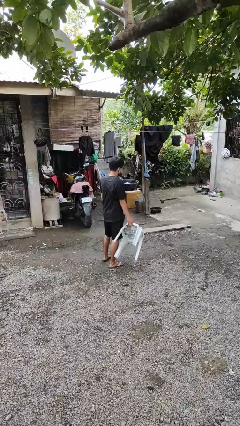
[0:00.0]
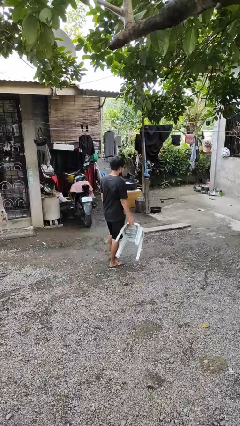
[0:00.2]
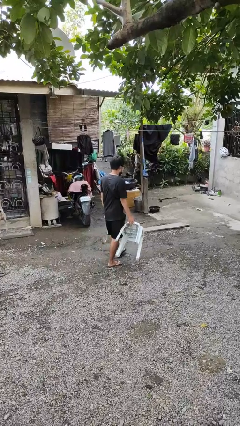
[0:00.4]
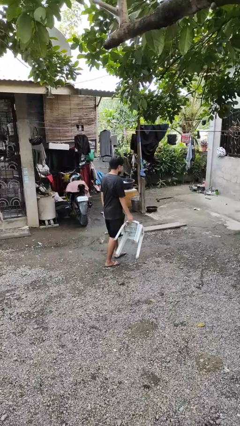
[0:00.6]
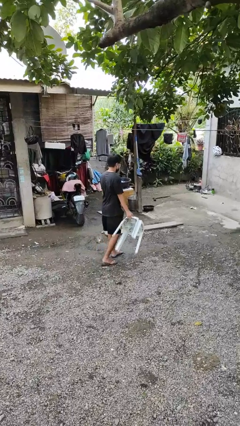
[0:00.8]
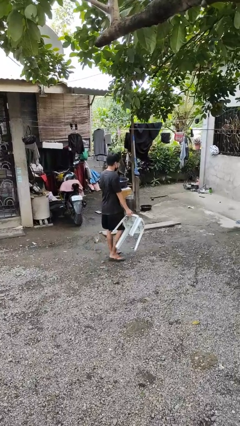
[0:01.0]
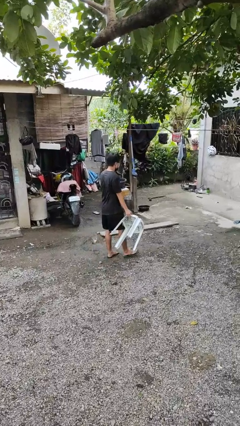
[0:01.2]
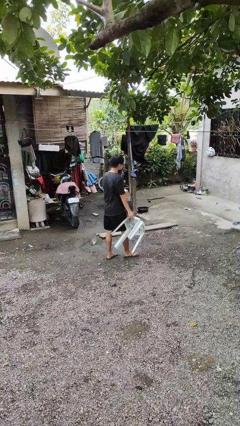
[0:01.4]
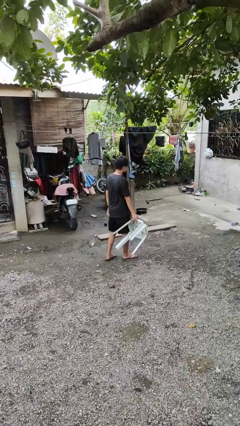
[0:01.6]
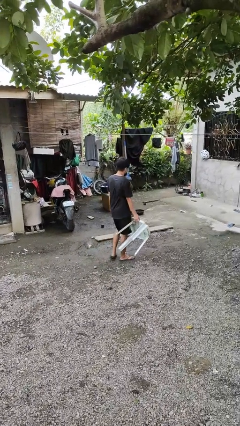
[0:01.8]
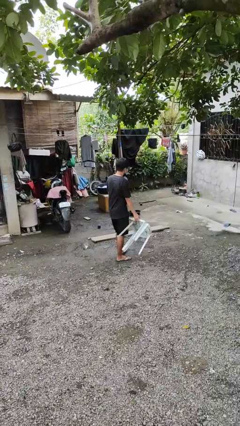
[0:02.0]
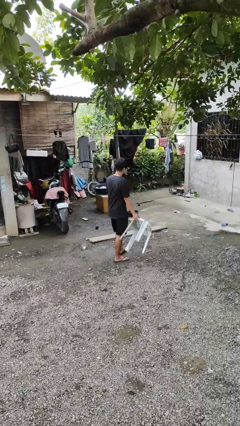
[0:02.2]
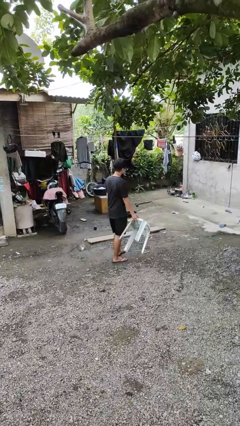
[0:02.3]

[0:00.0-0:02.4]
person carries furniture

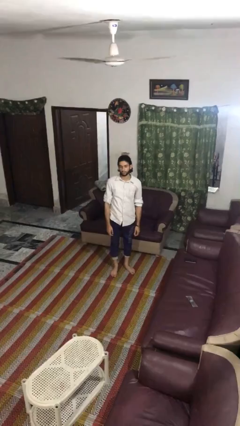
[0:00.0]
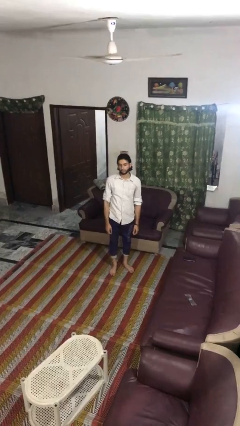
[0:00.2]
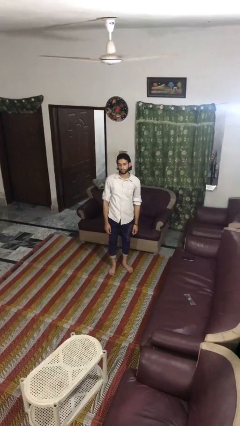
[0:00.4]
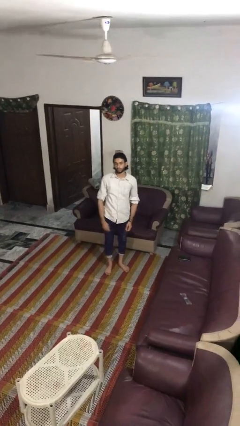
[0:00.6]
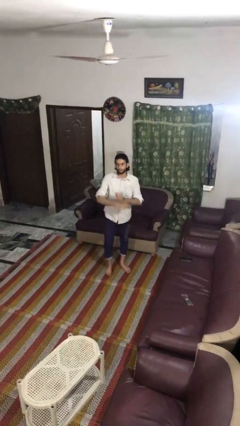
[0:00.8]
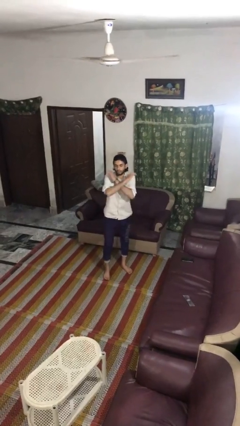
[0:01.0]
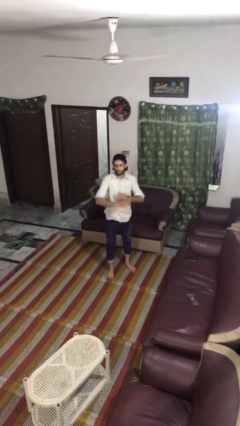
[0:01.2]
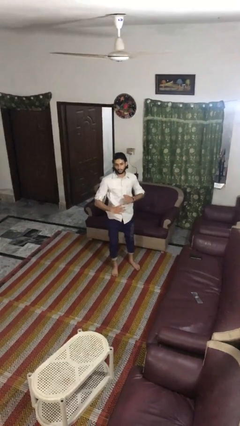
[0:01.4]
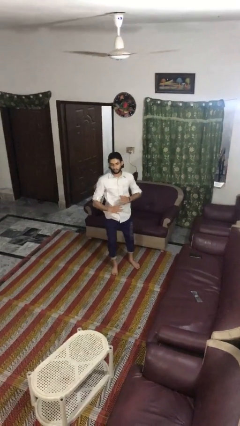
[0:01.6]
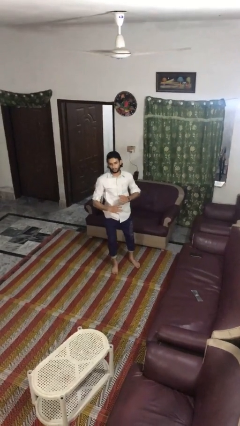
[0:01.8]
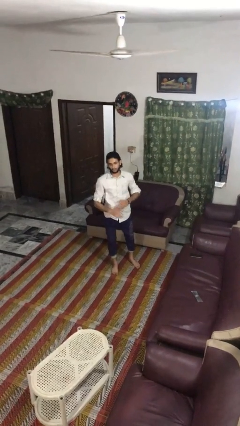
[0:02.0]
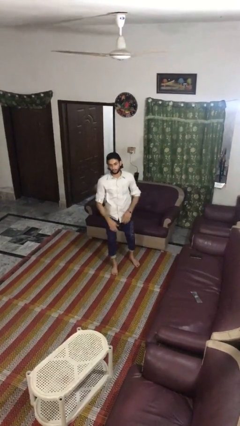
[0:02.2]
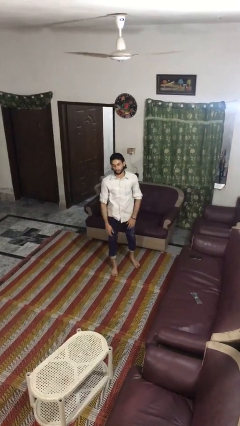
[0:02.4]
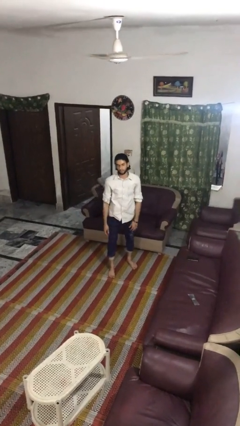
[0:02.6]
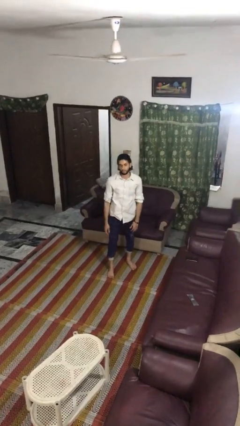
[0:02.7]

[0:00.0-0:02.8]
person karate chop

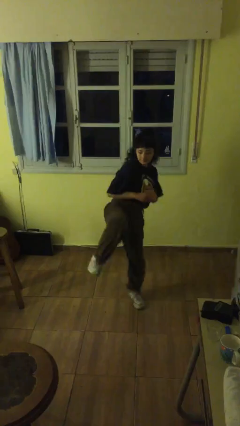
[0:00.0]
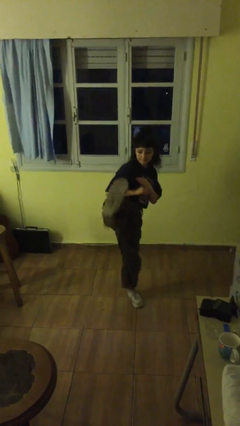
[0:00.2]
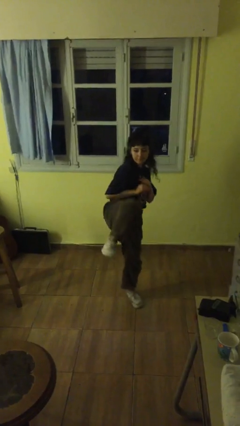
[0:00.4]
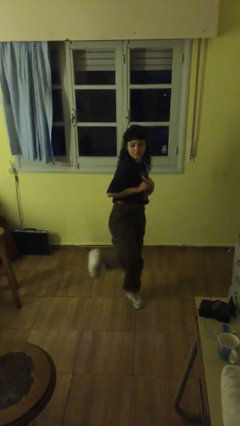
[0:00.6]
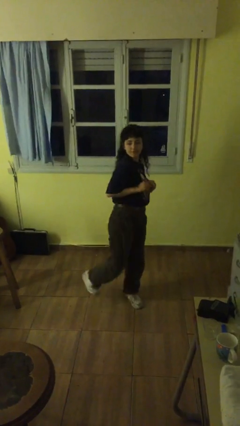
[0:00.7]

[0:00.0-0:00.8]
person karate kicks

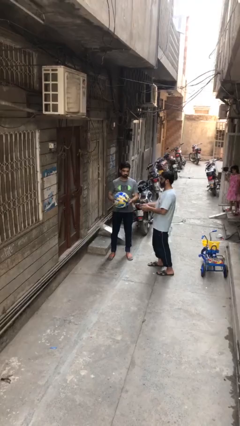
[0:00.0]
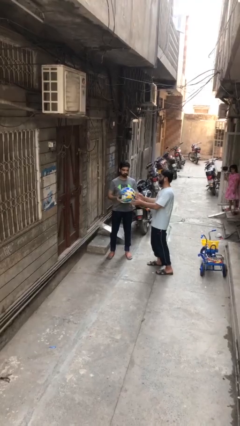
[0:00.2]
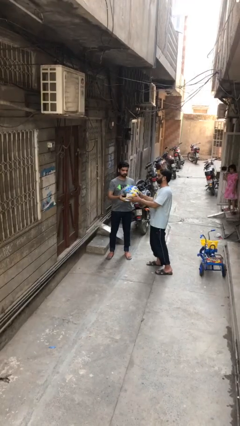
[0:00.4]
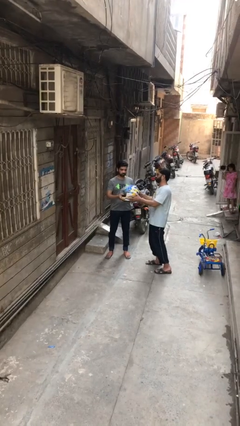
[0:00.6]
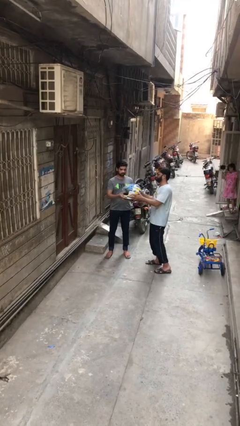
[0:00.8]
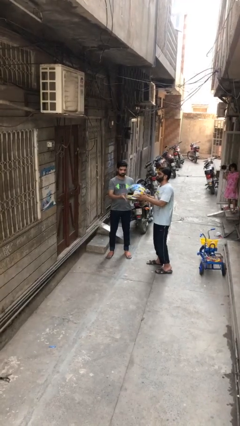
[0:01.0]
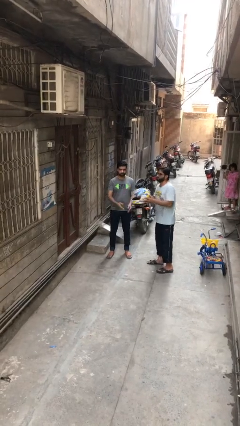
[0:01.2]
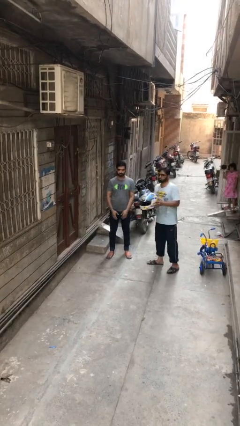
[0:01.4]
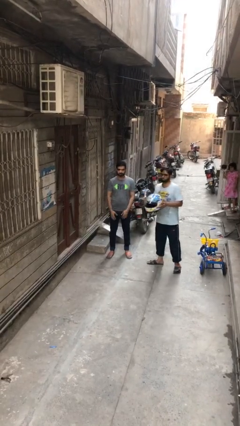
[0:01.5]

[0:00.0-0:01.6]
person transfers object to person

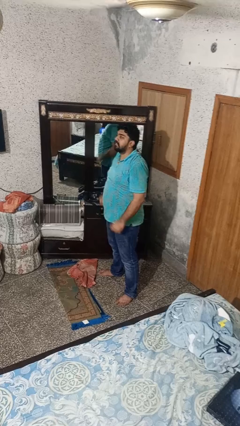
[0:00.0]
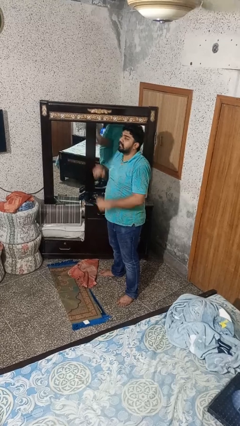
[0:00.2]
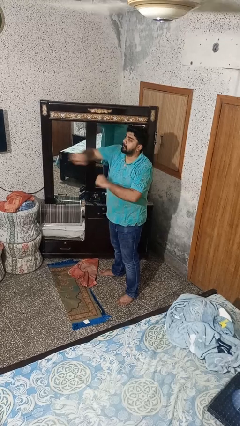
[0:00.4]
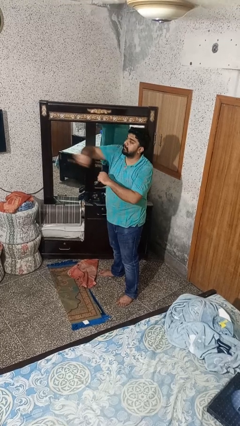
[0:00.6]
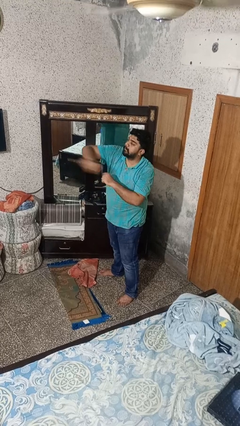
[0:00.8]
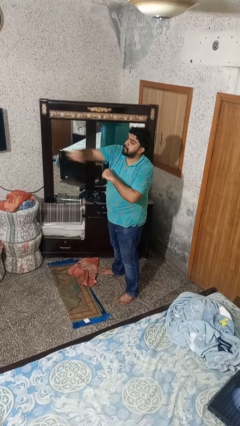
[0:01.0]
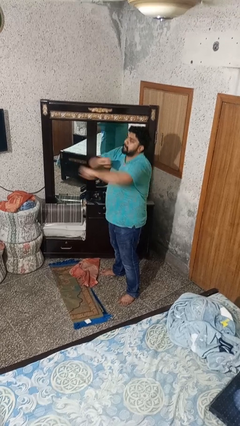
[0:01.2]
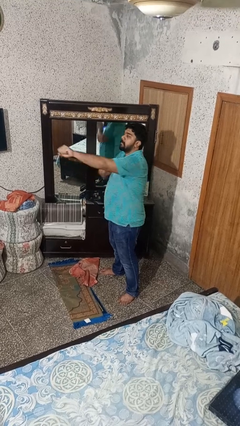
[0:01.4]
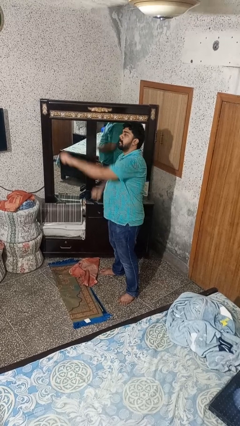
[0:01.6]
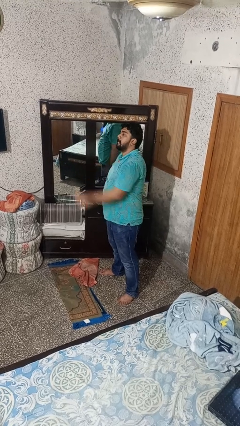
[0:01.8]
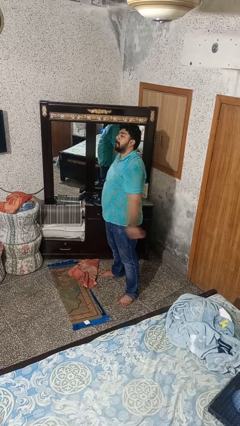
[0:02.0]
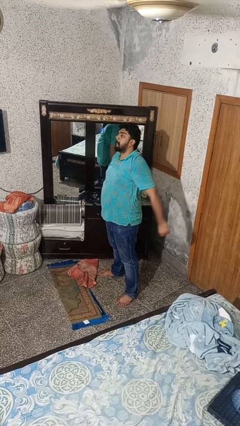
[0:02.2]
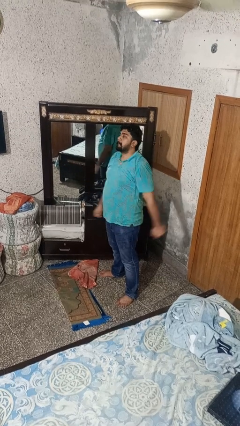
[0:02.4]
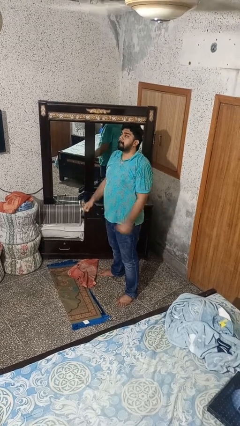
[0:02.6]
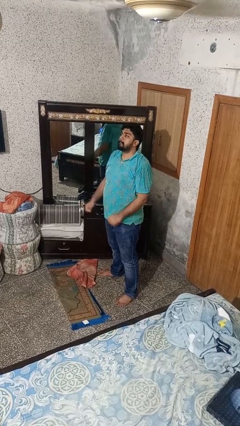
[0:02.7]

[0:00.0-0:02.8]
person punches

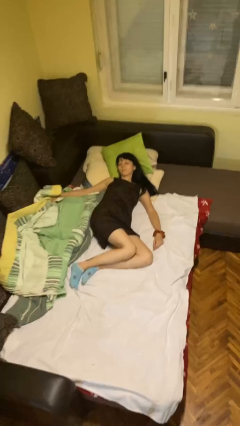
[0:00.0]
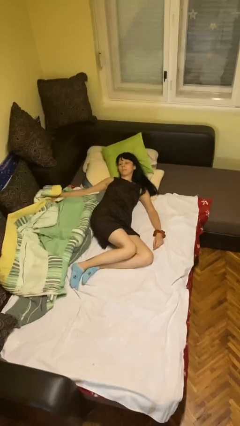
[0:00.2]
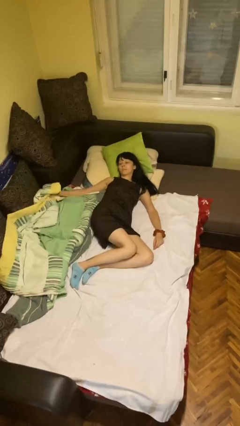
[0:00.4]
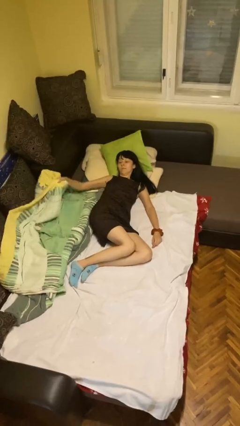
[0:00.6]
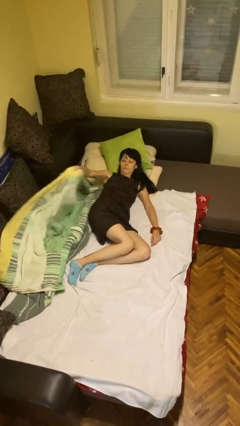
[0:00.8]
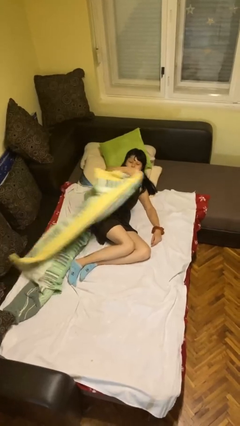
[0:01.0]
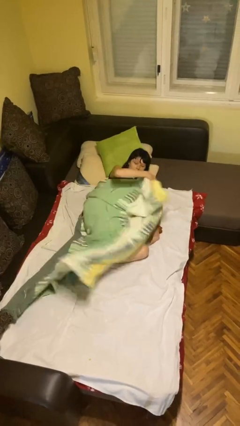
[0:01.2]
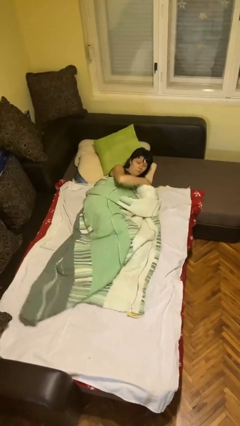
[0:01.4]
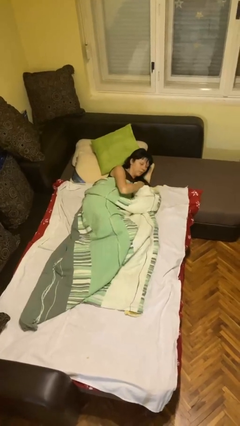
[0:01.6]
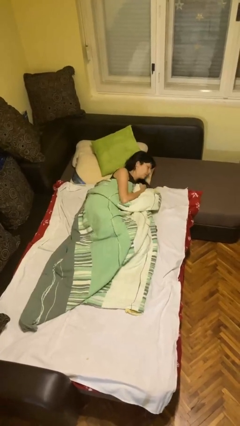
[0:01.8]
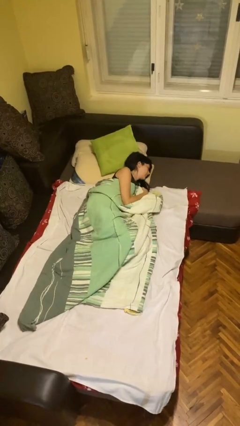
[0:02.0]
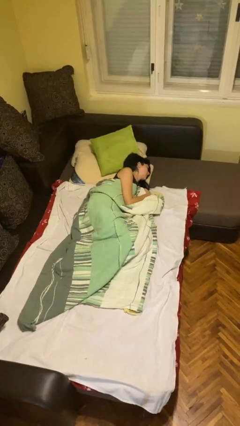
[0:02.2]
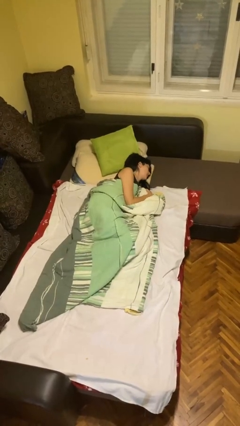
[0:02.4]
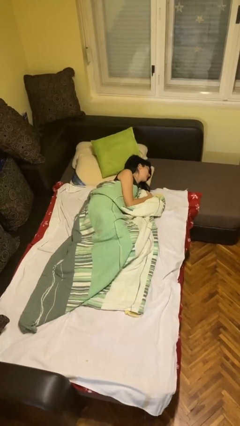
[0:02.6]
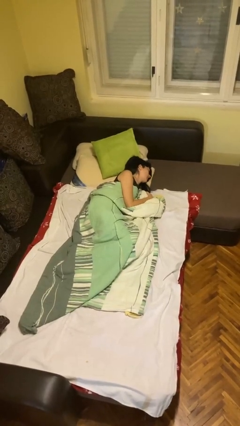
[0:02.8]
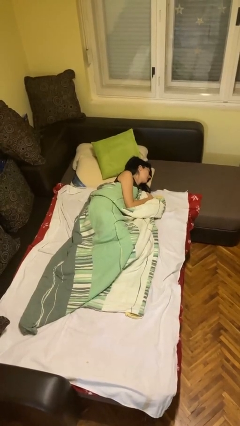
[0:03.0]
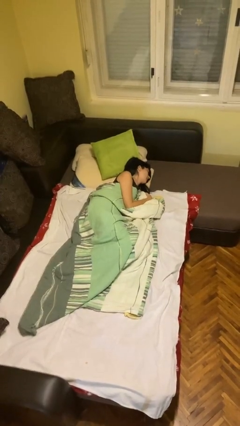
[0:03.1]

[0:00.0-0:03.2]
person covers with bedsheets

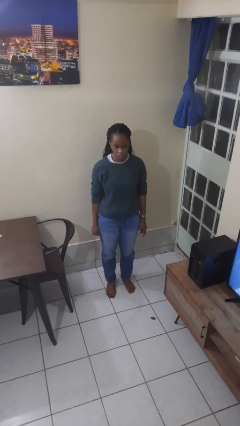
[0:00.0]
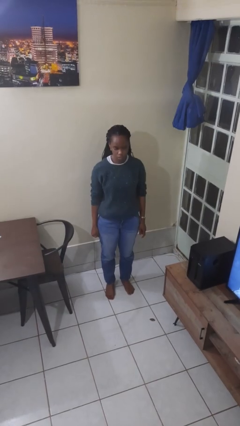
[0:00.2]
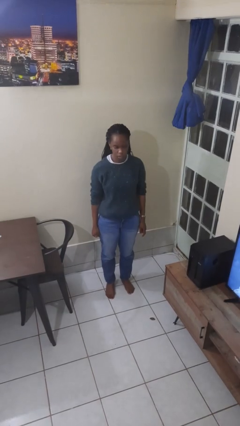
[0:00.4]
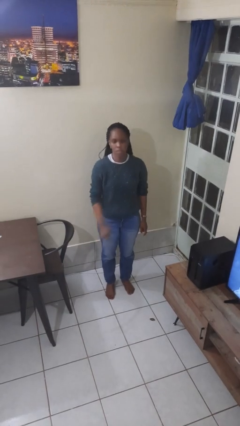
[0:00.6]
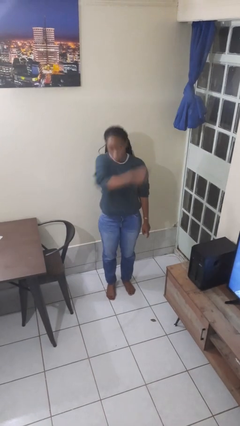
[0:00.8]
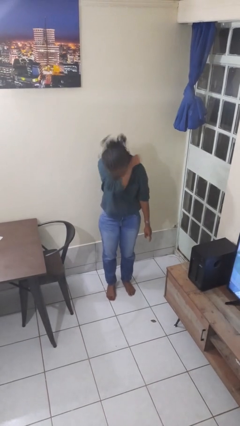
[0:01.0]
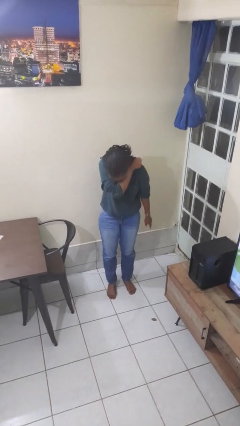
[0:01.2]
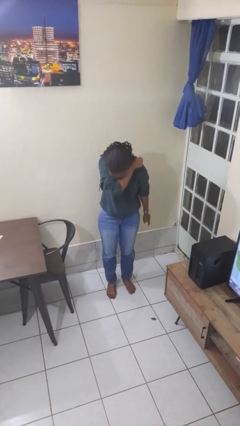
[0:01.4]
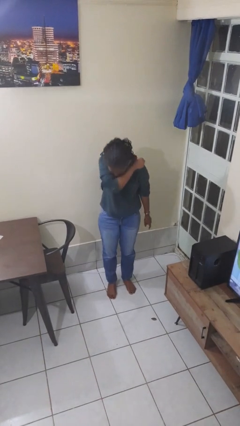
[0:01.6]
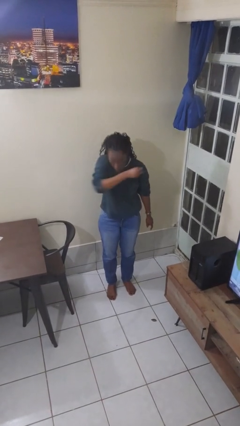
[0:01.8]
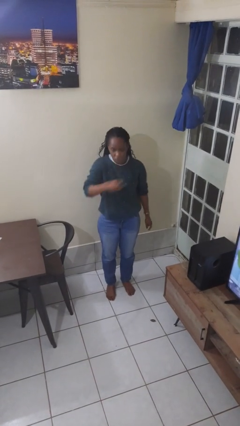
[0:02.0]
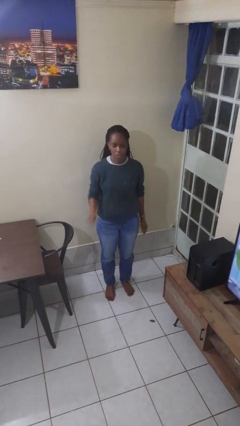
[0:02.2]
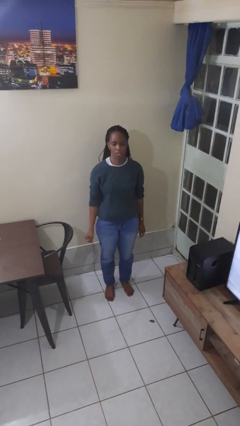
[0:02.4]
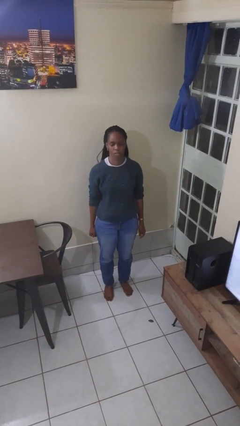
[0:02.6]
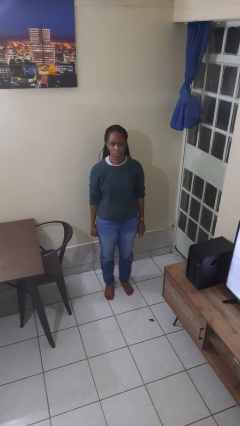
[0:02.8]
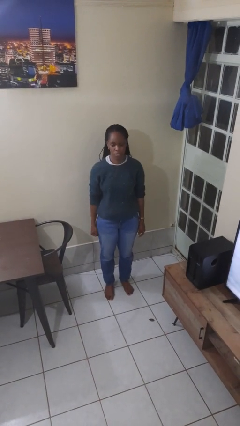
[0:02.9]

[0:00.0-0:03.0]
person sneezes into arm
